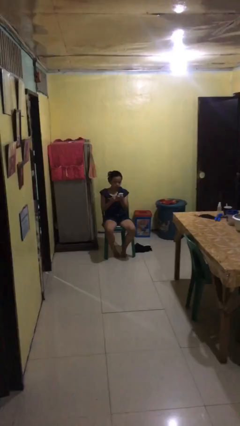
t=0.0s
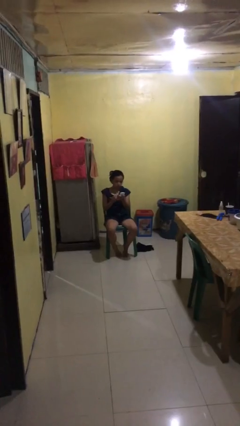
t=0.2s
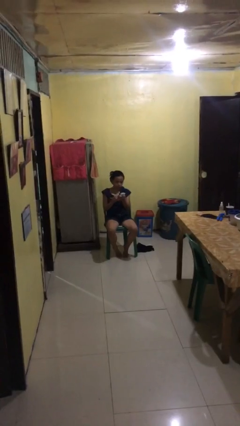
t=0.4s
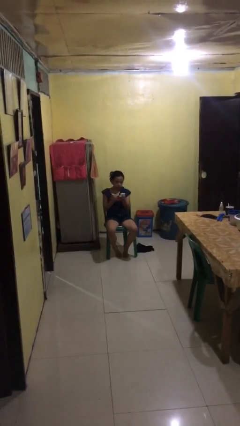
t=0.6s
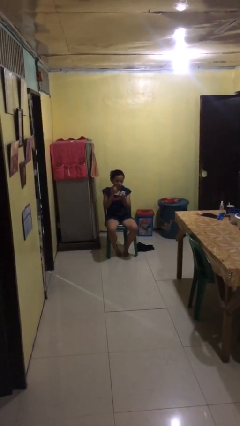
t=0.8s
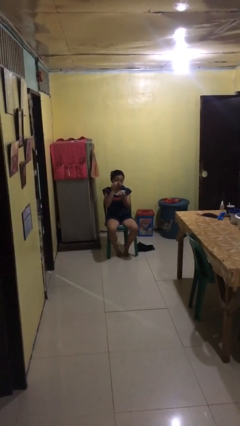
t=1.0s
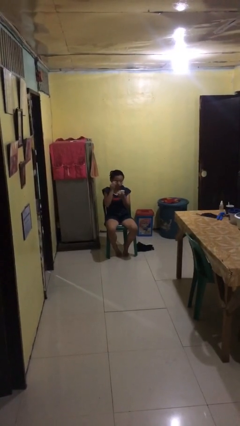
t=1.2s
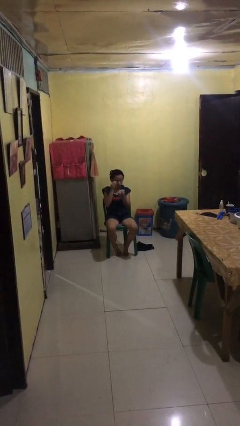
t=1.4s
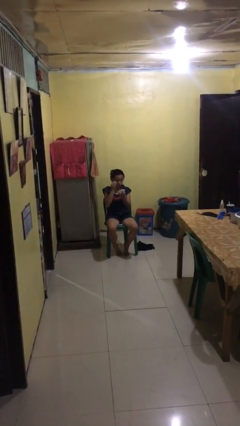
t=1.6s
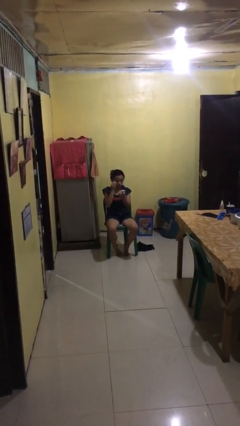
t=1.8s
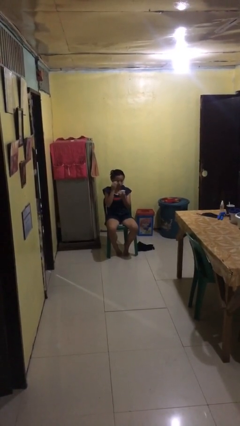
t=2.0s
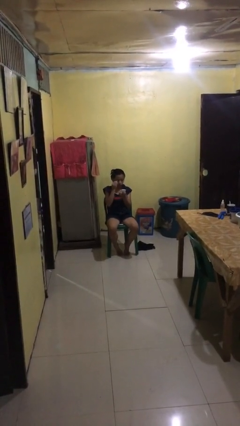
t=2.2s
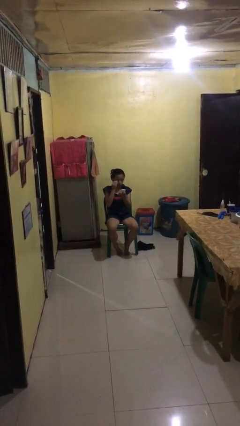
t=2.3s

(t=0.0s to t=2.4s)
person applies eye makeup

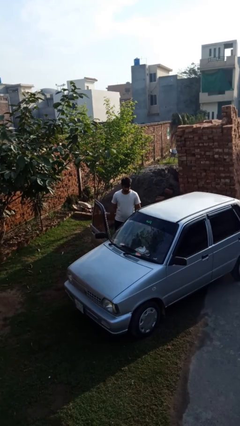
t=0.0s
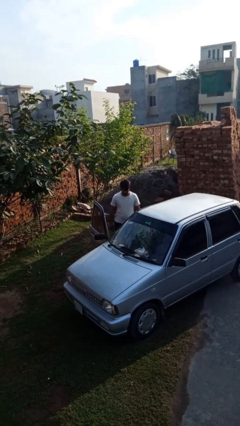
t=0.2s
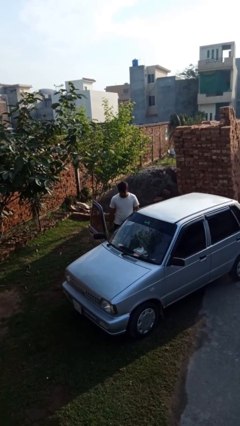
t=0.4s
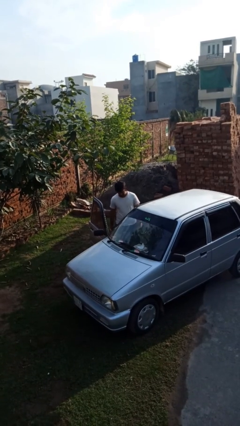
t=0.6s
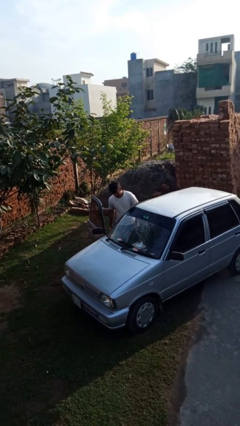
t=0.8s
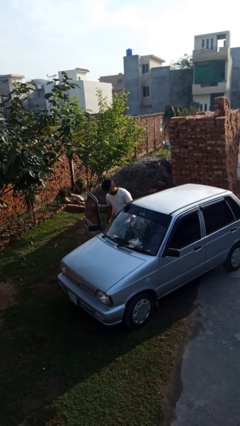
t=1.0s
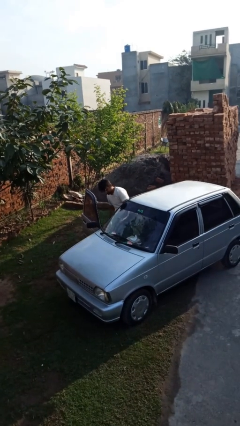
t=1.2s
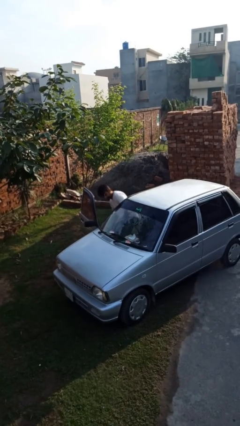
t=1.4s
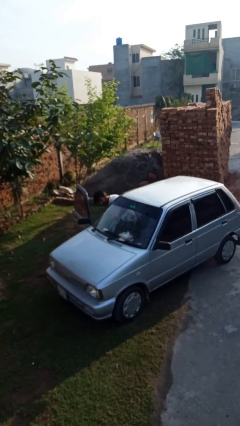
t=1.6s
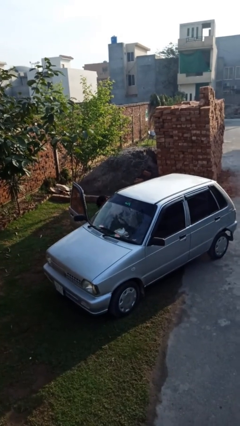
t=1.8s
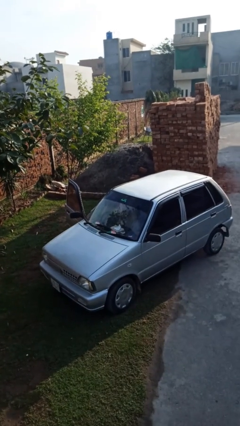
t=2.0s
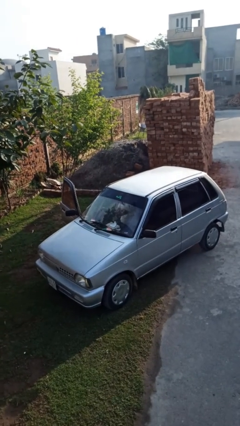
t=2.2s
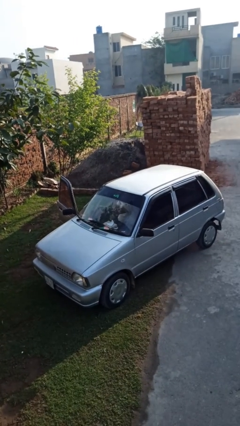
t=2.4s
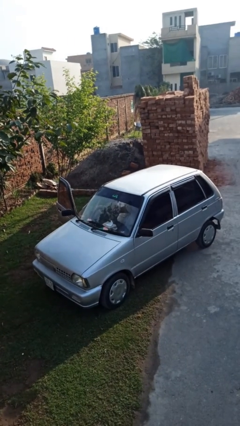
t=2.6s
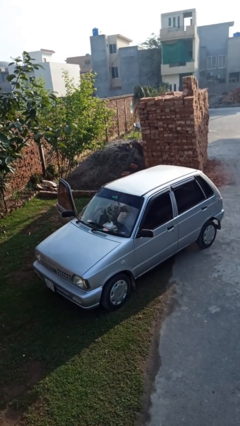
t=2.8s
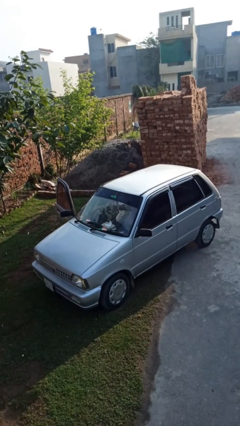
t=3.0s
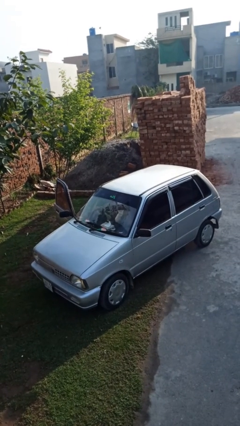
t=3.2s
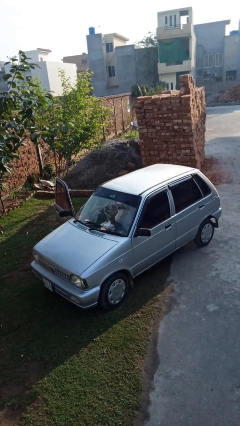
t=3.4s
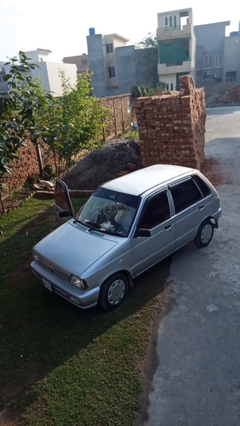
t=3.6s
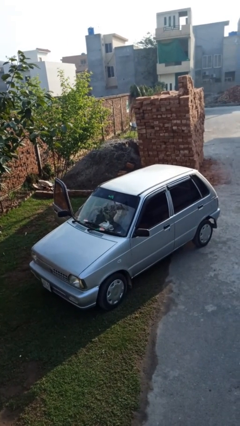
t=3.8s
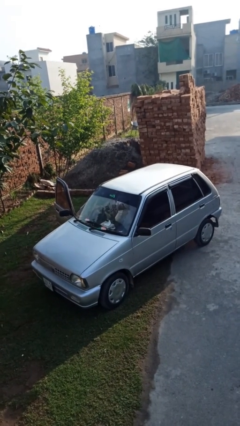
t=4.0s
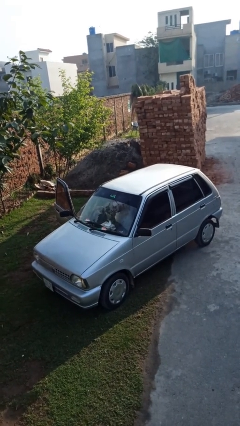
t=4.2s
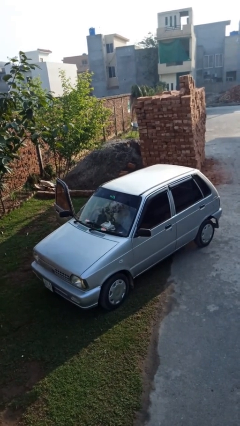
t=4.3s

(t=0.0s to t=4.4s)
person enters car

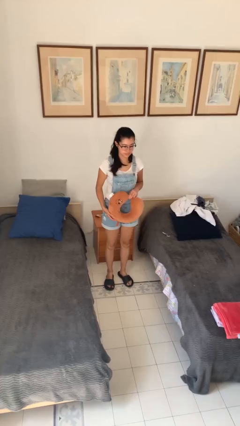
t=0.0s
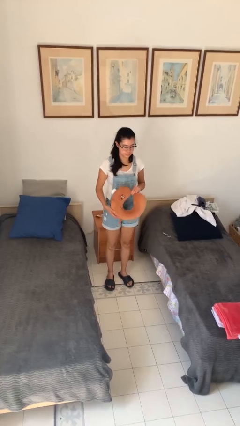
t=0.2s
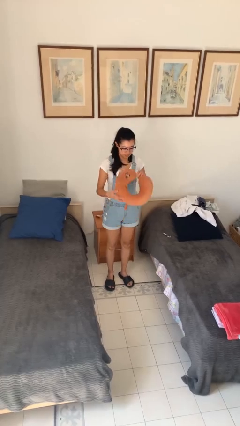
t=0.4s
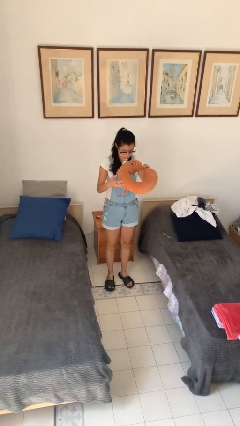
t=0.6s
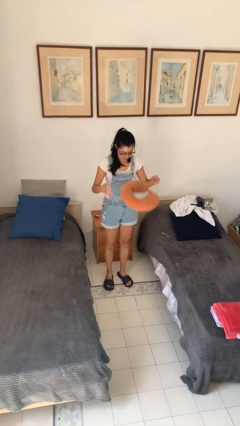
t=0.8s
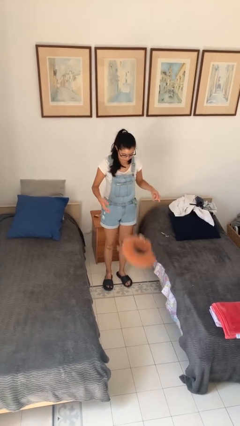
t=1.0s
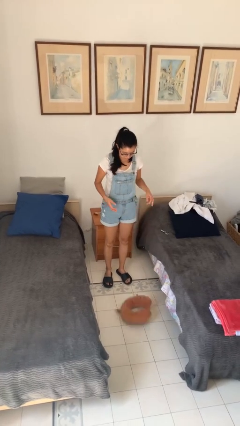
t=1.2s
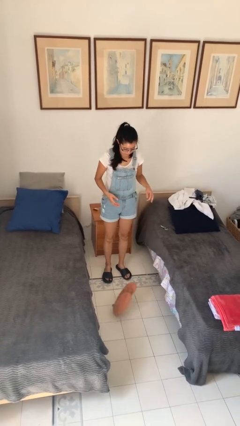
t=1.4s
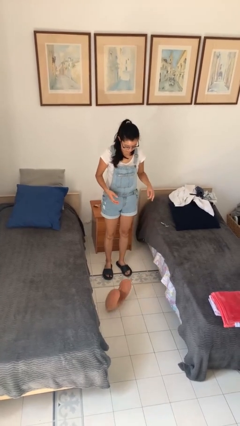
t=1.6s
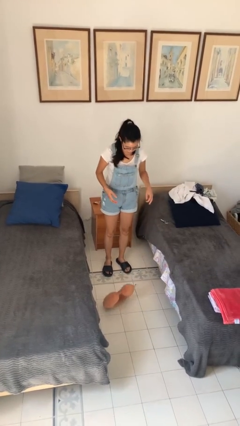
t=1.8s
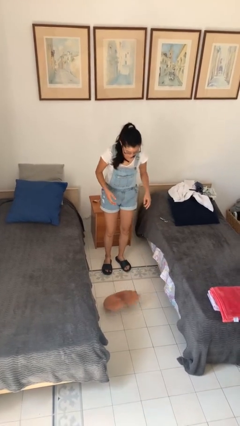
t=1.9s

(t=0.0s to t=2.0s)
person throws object into air

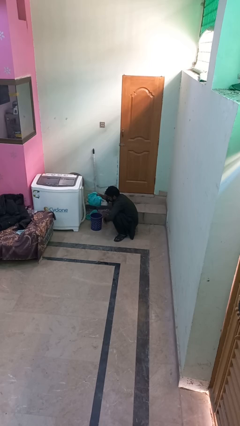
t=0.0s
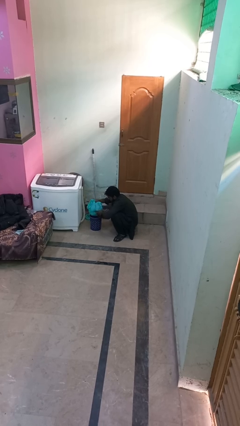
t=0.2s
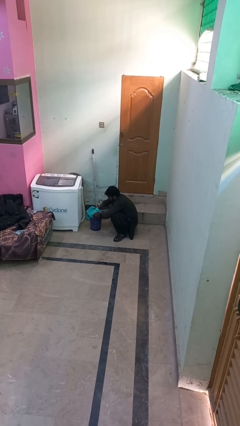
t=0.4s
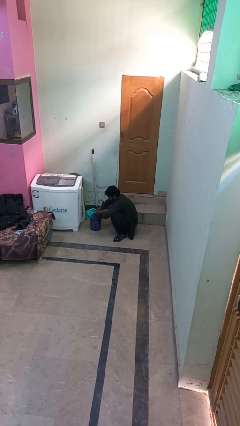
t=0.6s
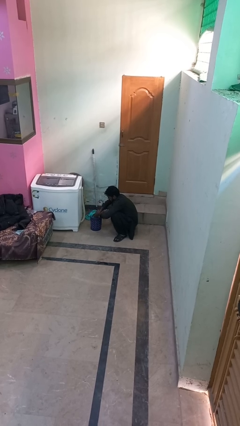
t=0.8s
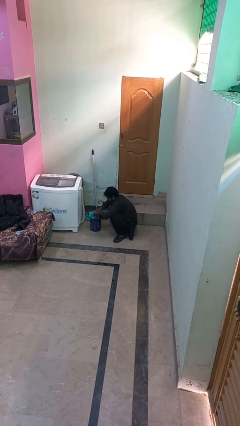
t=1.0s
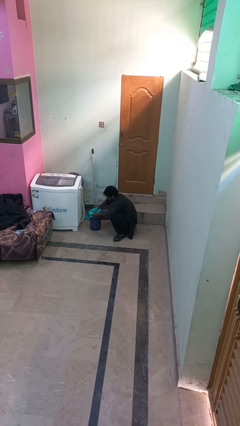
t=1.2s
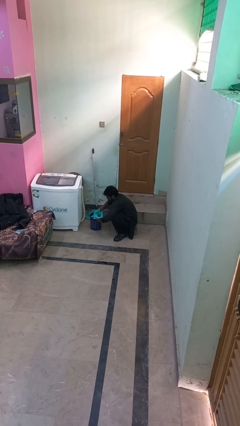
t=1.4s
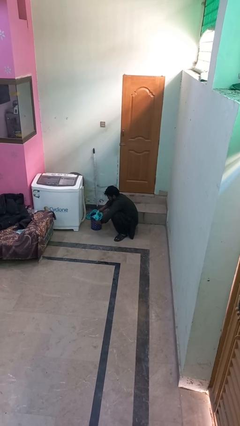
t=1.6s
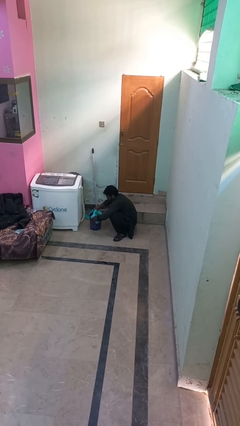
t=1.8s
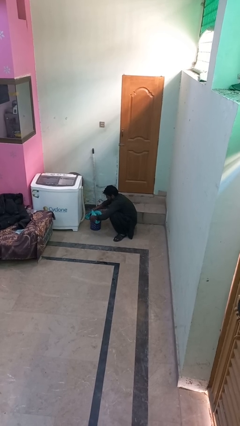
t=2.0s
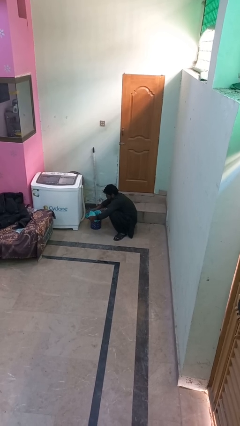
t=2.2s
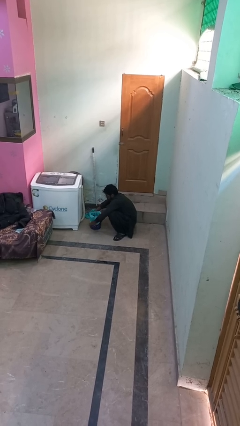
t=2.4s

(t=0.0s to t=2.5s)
person inserts trashbag into trashcan

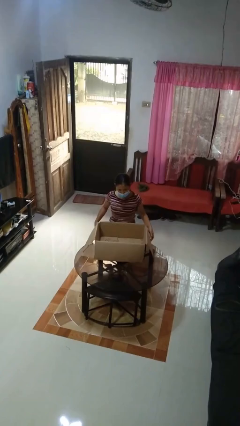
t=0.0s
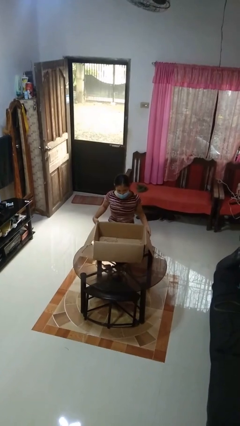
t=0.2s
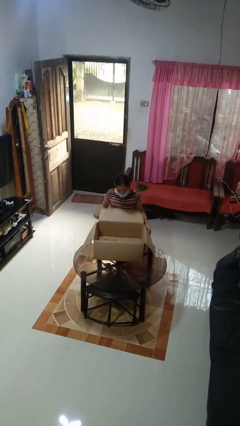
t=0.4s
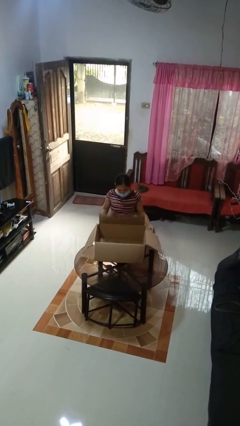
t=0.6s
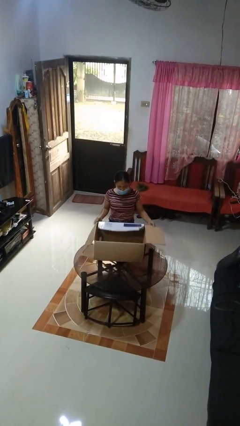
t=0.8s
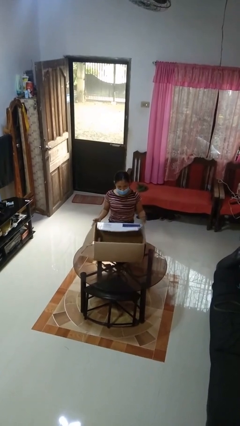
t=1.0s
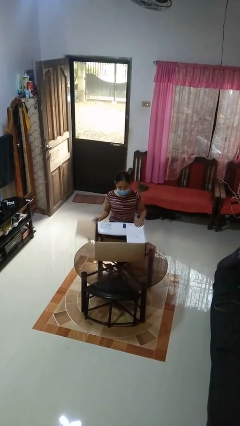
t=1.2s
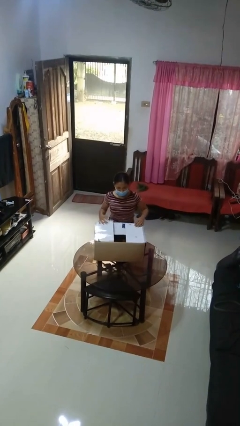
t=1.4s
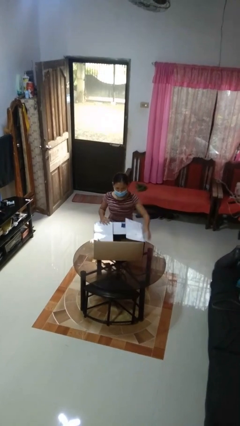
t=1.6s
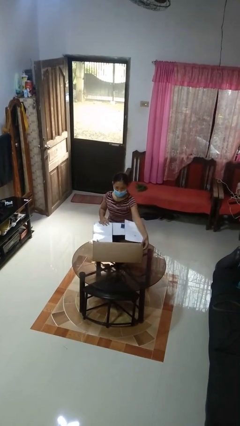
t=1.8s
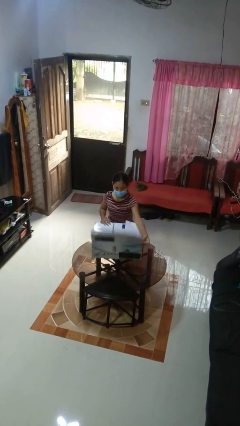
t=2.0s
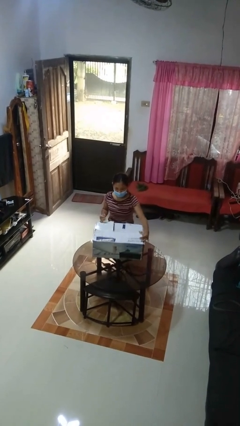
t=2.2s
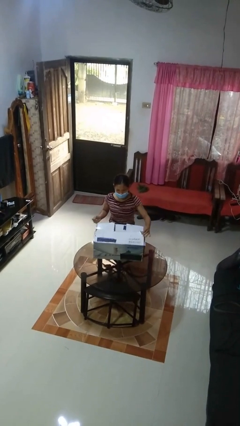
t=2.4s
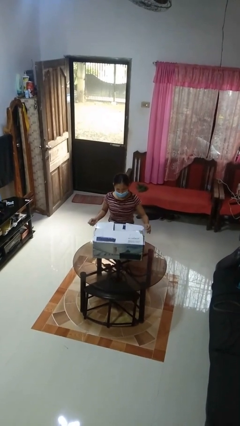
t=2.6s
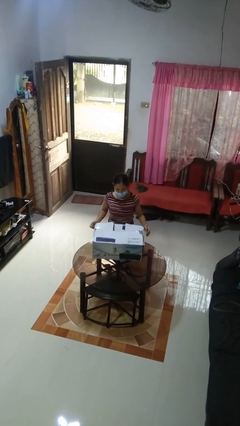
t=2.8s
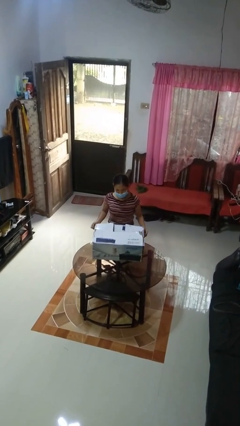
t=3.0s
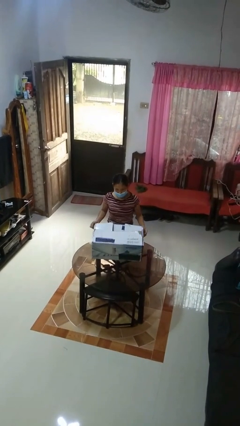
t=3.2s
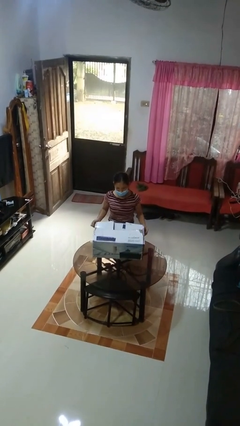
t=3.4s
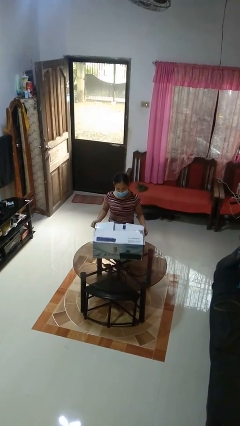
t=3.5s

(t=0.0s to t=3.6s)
person closes box

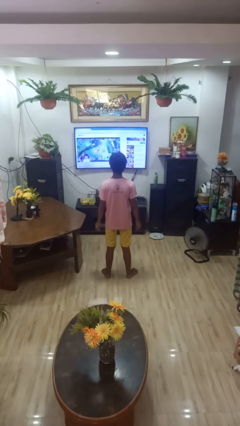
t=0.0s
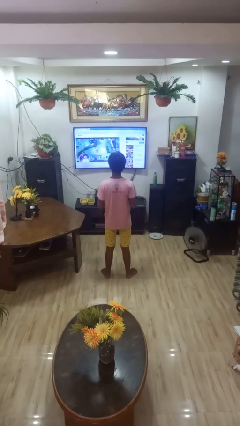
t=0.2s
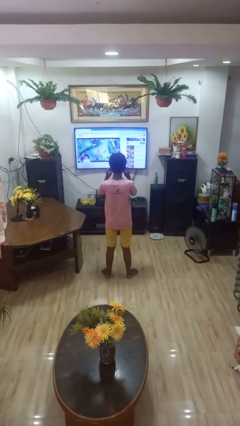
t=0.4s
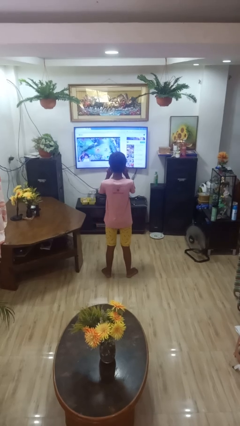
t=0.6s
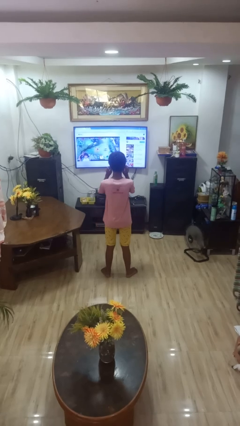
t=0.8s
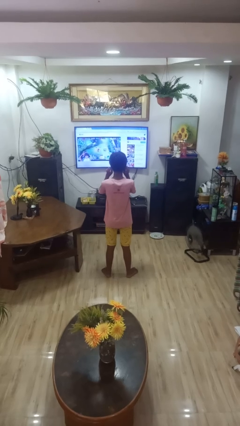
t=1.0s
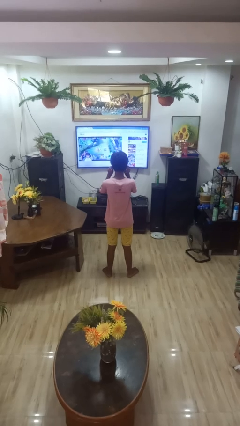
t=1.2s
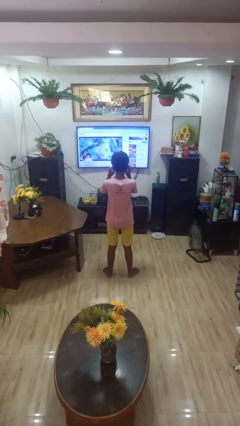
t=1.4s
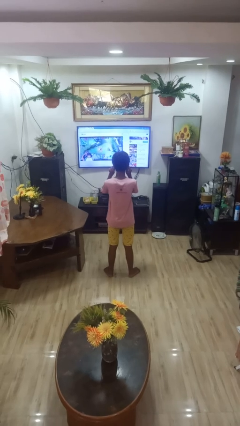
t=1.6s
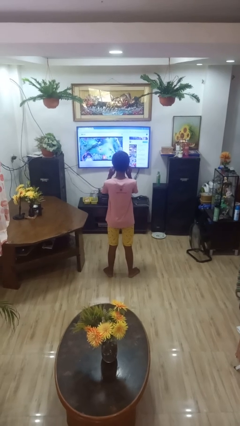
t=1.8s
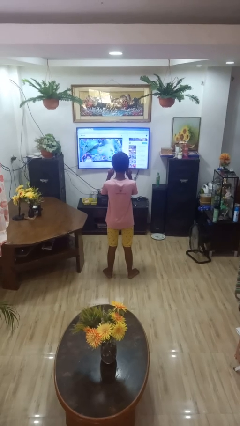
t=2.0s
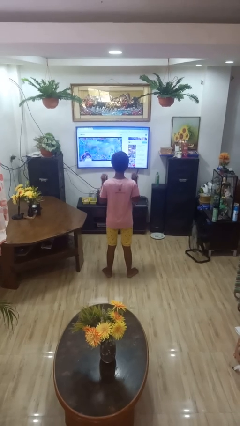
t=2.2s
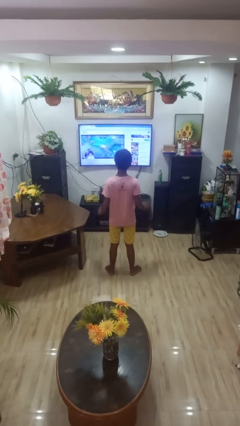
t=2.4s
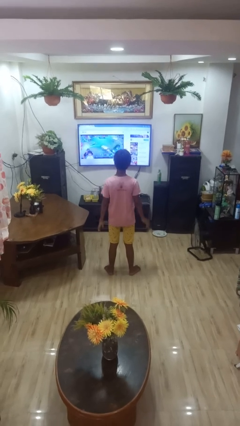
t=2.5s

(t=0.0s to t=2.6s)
person touches earlobe

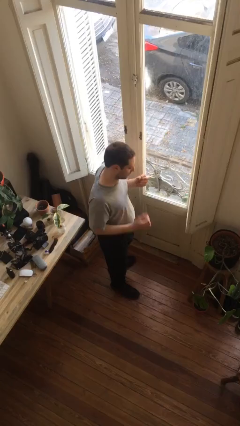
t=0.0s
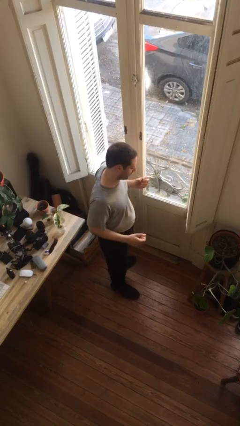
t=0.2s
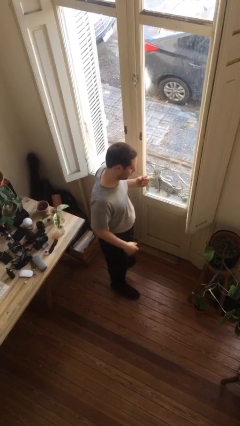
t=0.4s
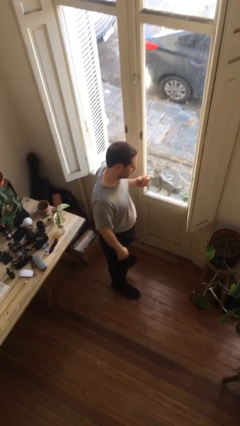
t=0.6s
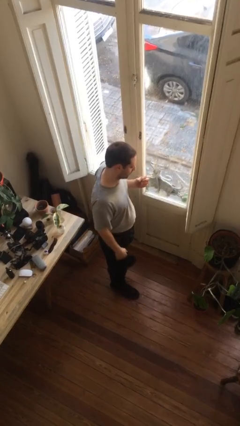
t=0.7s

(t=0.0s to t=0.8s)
person takes off ring
